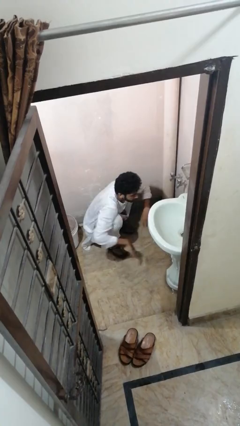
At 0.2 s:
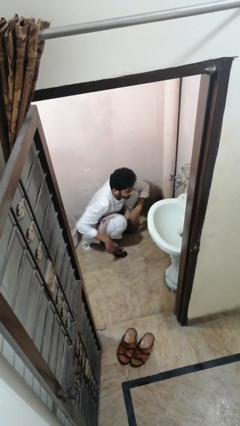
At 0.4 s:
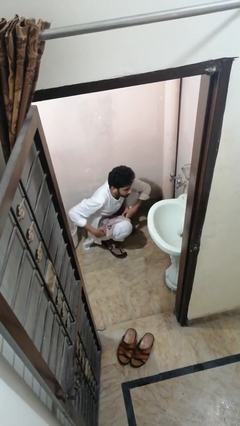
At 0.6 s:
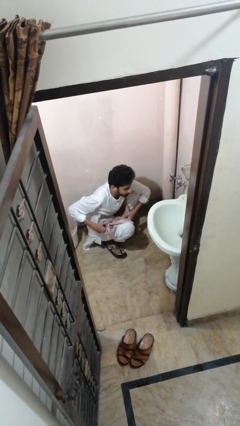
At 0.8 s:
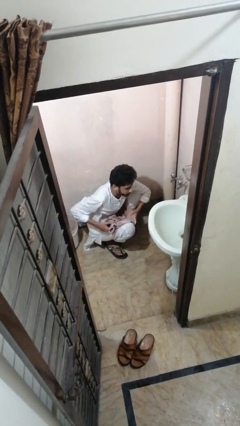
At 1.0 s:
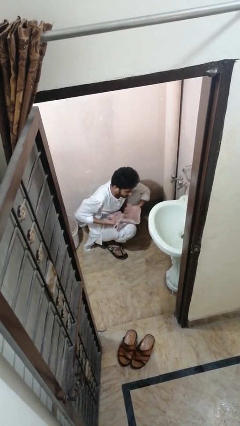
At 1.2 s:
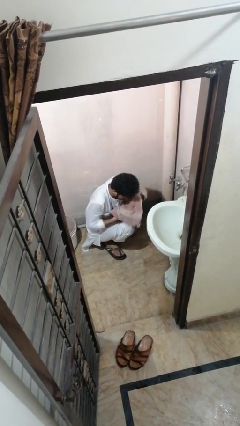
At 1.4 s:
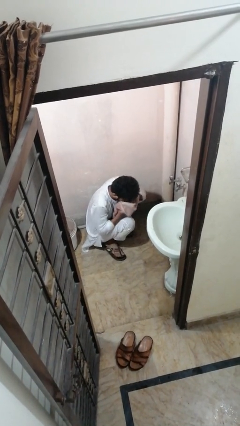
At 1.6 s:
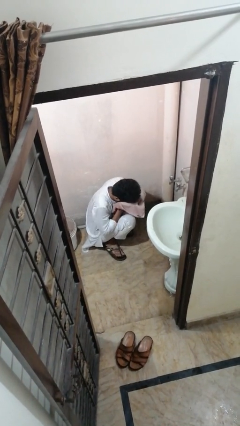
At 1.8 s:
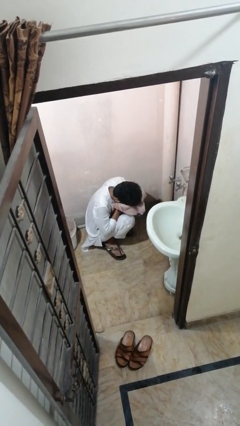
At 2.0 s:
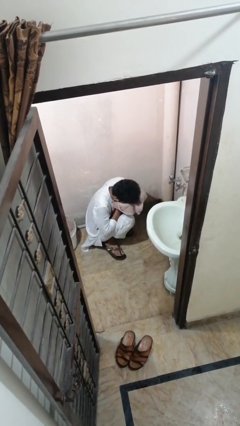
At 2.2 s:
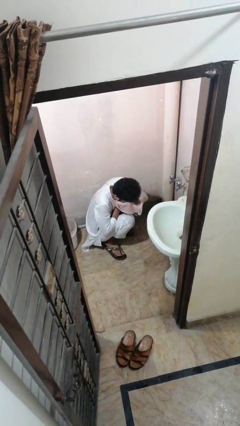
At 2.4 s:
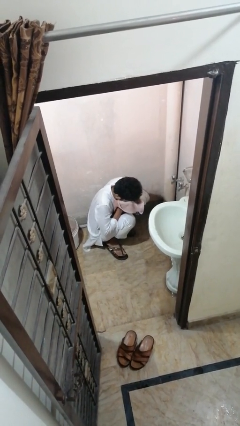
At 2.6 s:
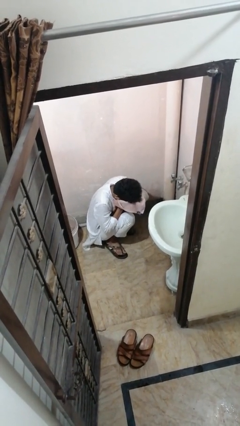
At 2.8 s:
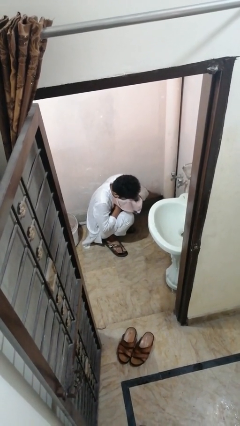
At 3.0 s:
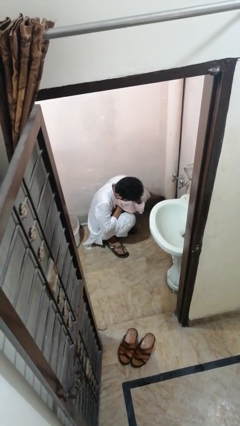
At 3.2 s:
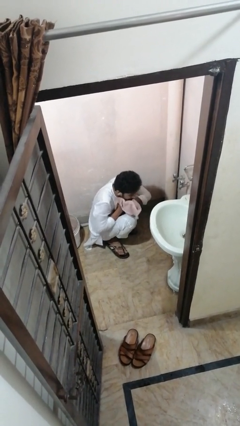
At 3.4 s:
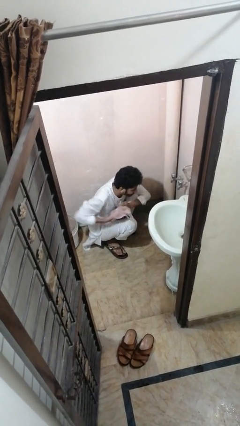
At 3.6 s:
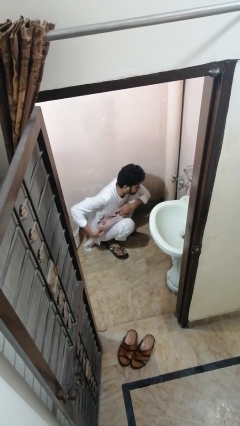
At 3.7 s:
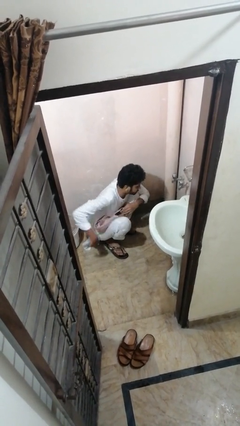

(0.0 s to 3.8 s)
person dries face with towel

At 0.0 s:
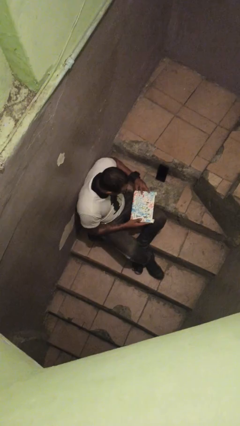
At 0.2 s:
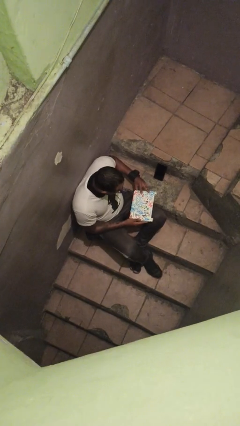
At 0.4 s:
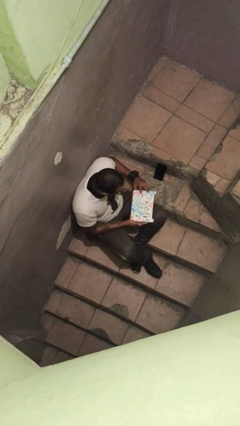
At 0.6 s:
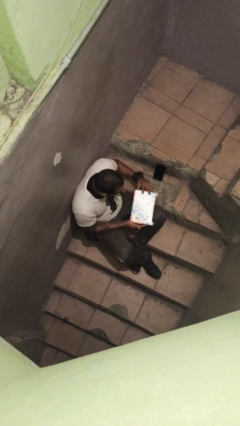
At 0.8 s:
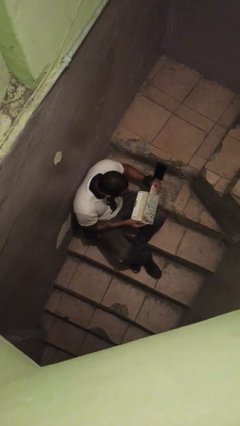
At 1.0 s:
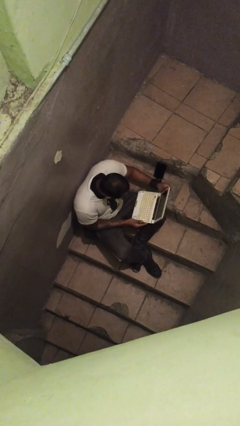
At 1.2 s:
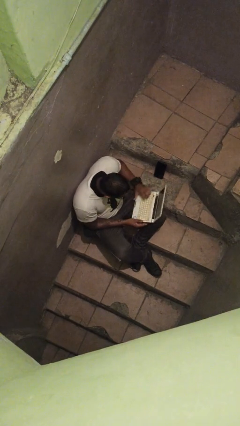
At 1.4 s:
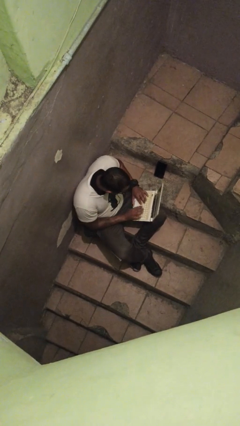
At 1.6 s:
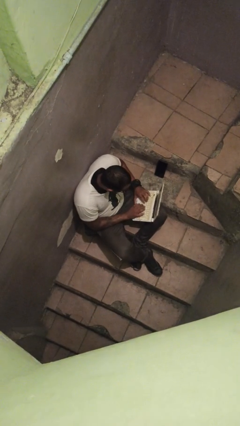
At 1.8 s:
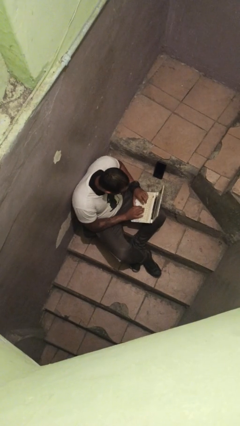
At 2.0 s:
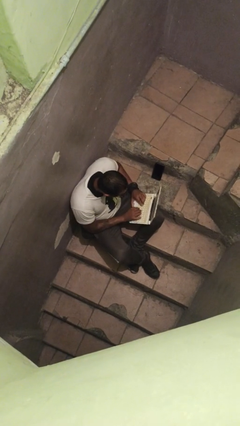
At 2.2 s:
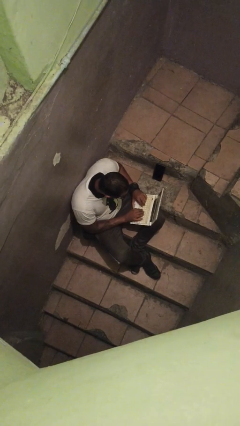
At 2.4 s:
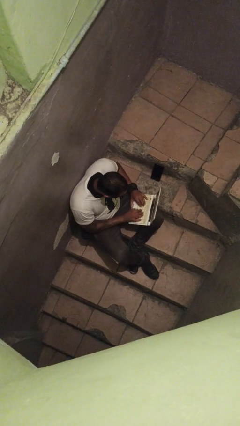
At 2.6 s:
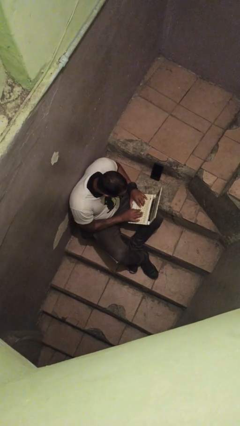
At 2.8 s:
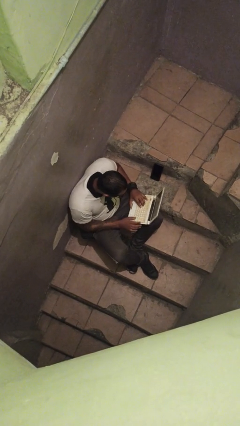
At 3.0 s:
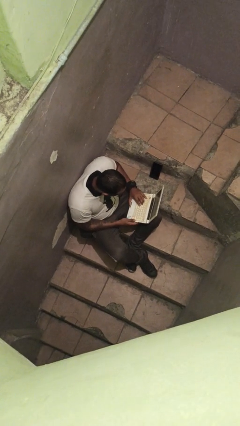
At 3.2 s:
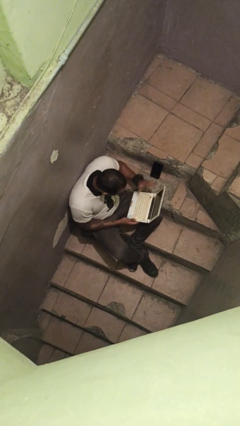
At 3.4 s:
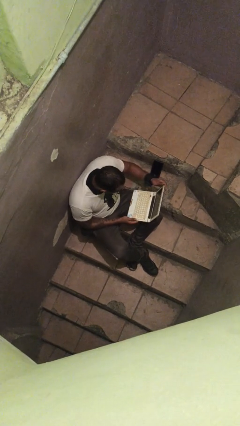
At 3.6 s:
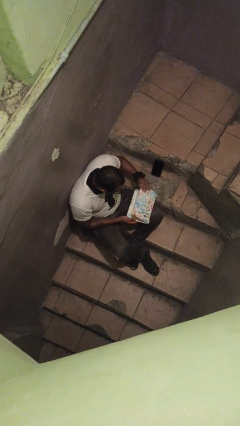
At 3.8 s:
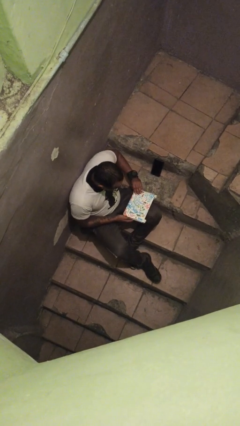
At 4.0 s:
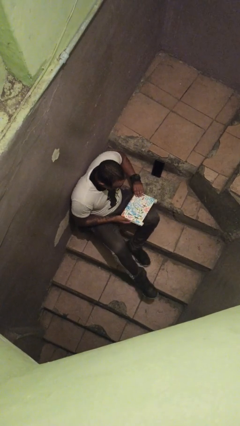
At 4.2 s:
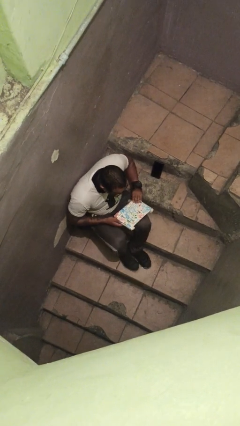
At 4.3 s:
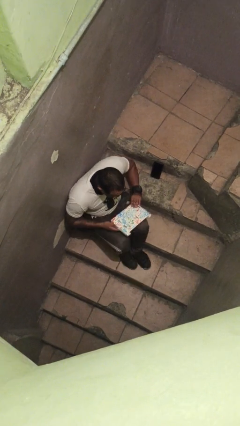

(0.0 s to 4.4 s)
person interacts with laptop

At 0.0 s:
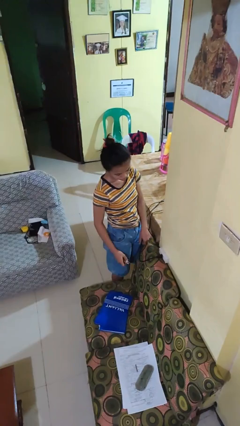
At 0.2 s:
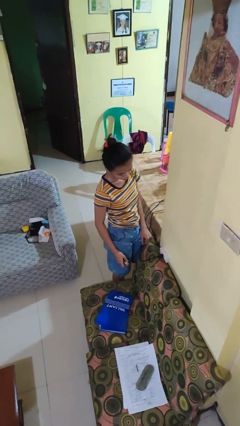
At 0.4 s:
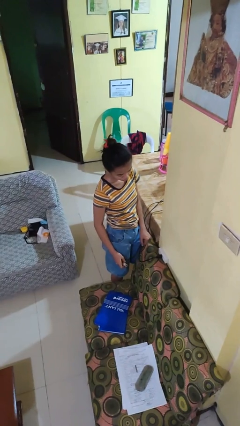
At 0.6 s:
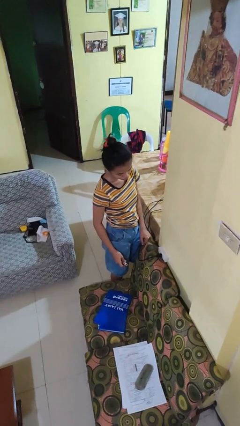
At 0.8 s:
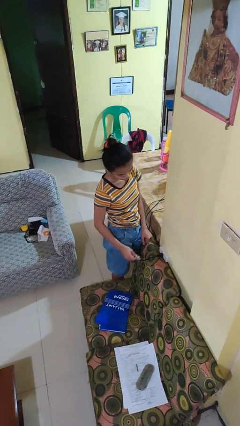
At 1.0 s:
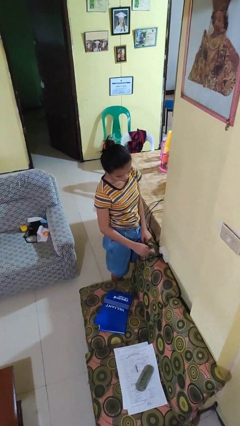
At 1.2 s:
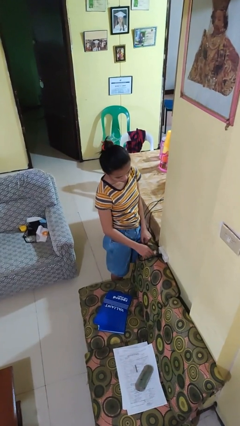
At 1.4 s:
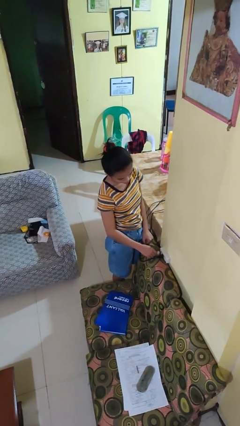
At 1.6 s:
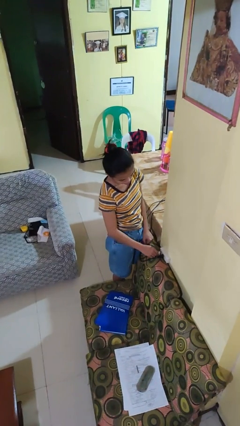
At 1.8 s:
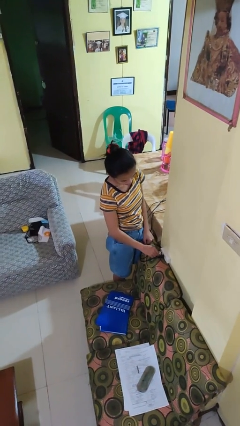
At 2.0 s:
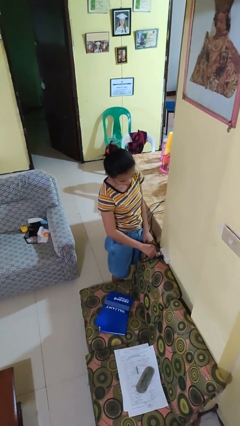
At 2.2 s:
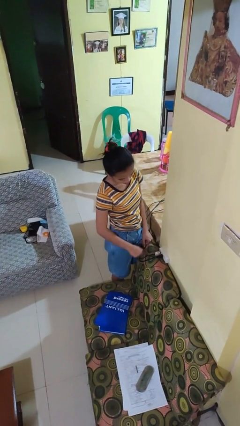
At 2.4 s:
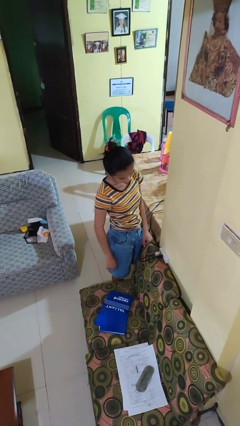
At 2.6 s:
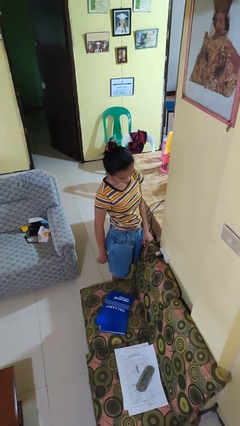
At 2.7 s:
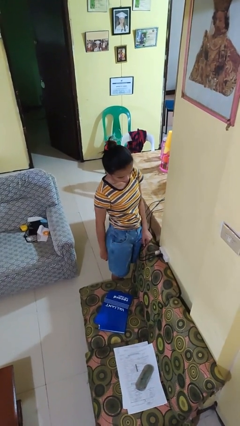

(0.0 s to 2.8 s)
person plugs into electrical socket

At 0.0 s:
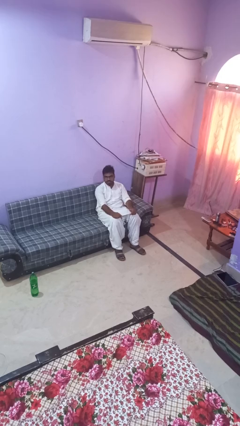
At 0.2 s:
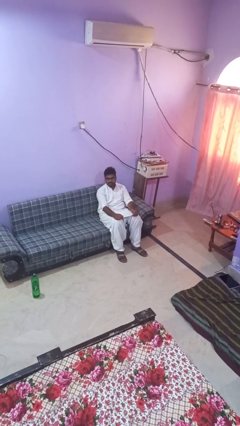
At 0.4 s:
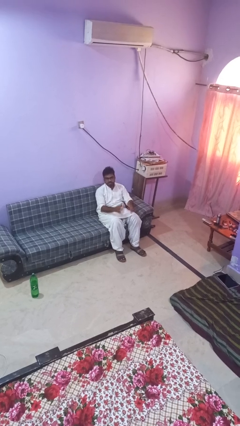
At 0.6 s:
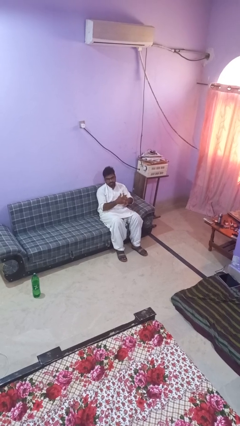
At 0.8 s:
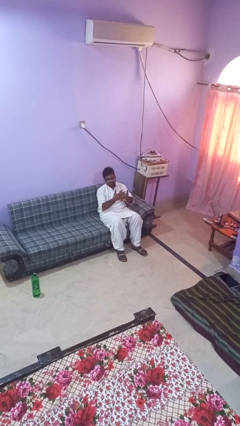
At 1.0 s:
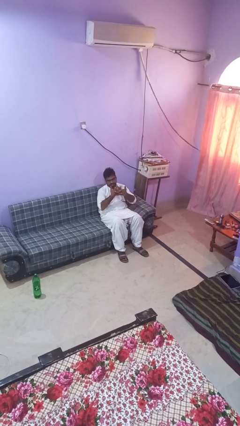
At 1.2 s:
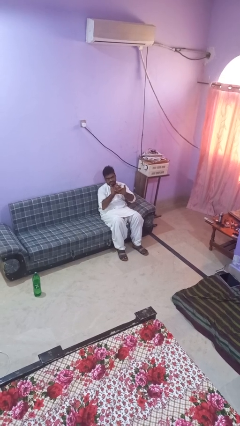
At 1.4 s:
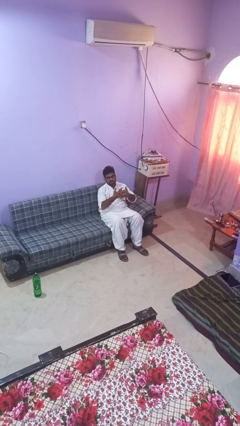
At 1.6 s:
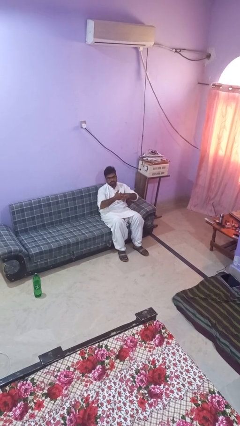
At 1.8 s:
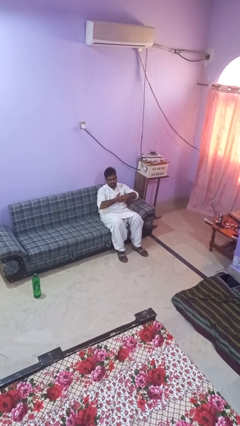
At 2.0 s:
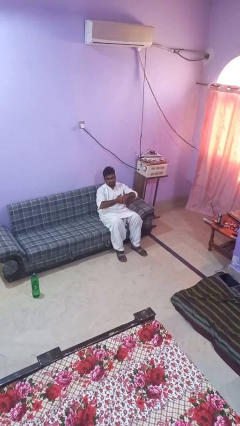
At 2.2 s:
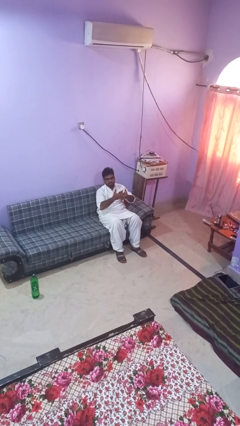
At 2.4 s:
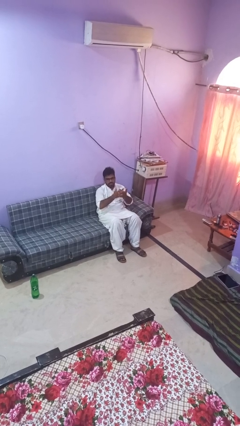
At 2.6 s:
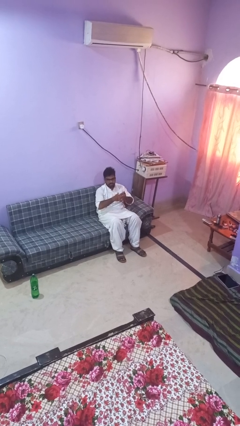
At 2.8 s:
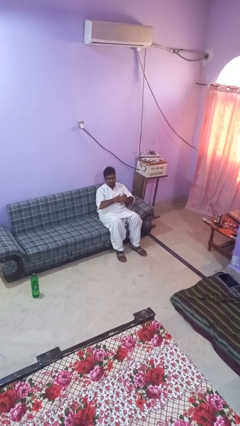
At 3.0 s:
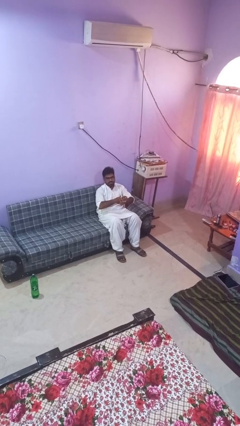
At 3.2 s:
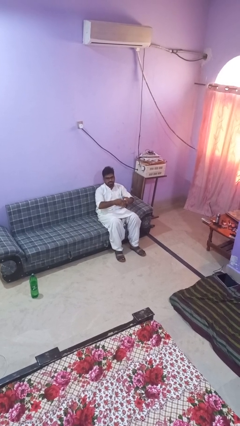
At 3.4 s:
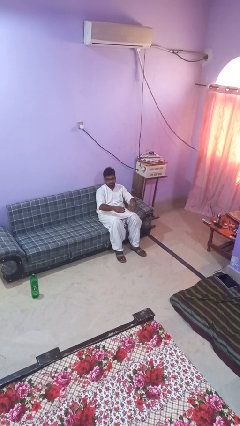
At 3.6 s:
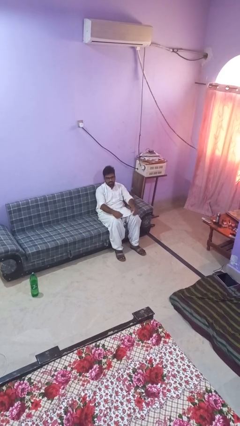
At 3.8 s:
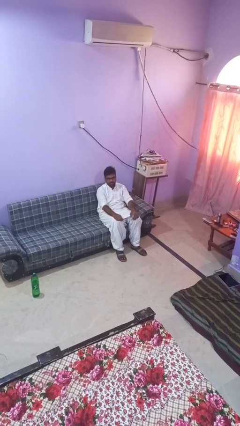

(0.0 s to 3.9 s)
person cracks knuckles

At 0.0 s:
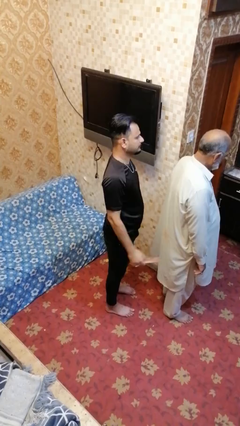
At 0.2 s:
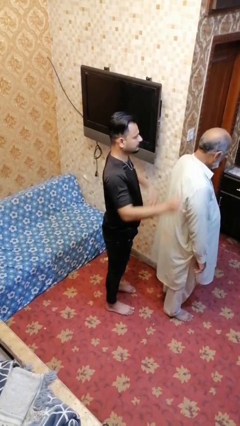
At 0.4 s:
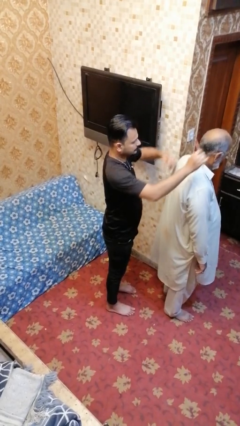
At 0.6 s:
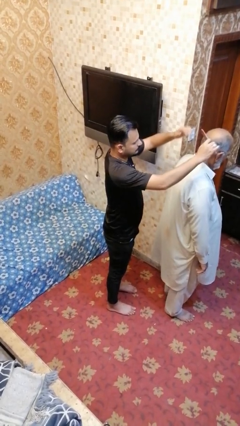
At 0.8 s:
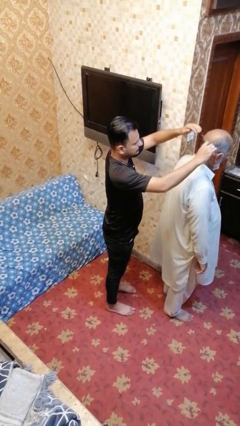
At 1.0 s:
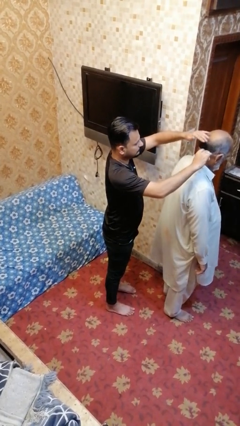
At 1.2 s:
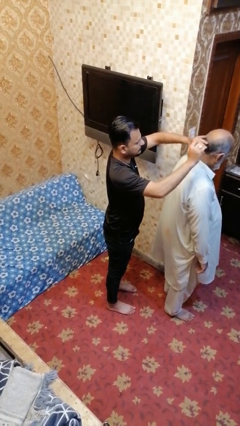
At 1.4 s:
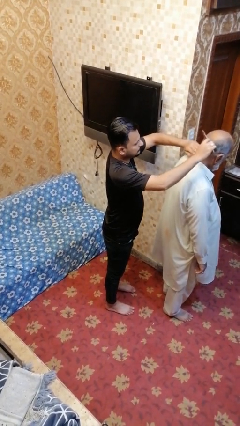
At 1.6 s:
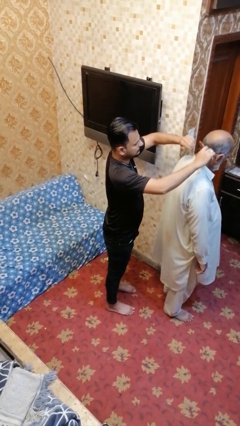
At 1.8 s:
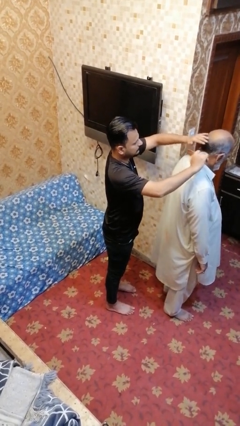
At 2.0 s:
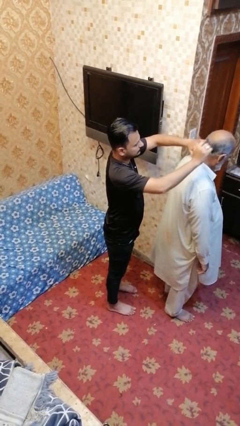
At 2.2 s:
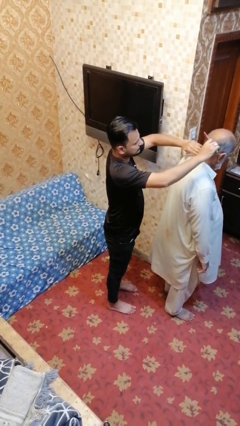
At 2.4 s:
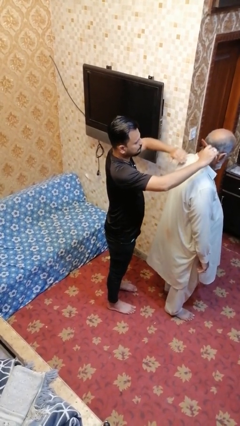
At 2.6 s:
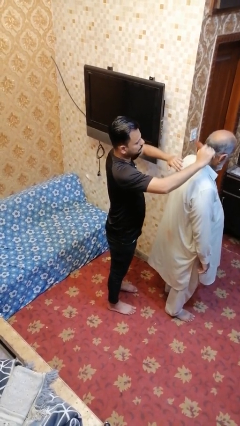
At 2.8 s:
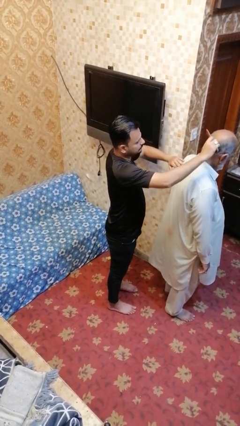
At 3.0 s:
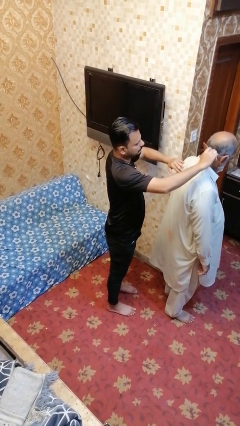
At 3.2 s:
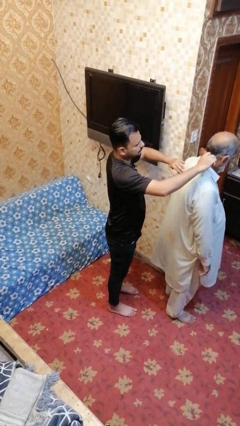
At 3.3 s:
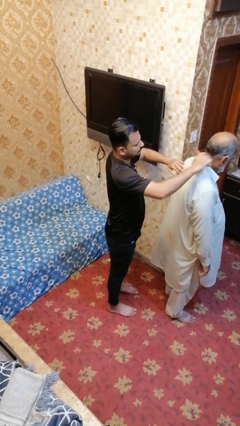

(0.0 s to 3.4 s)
person brushes hair of person
